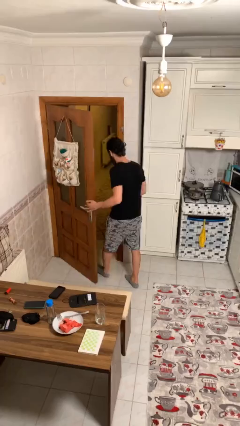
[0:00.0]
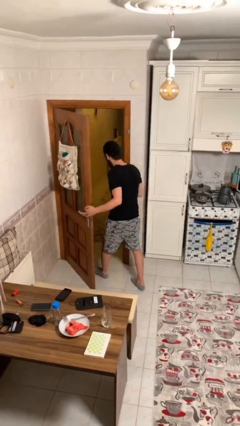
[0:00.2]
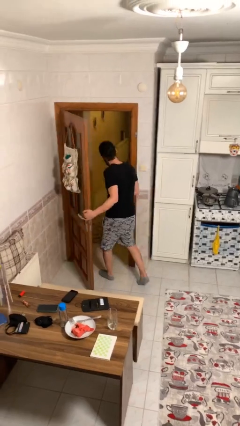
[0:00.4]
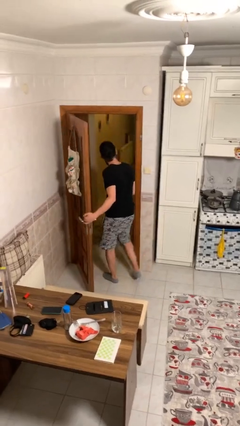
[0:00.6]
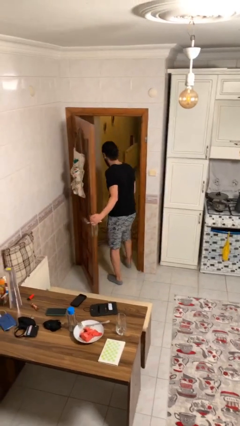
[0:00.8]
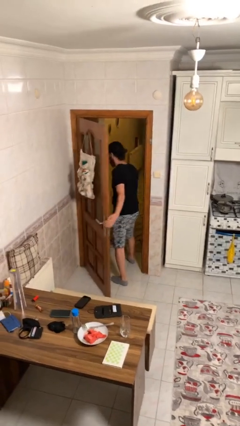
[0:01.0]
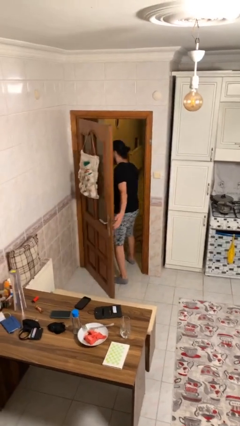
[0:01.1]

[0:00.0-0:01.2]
person exits scene through structure

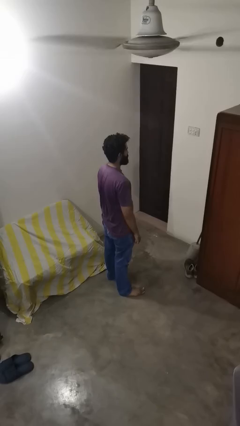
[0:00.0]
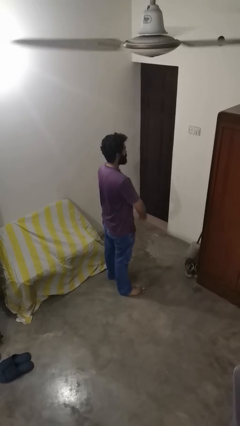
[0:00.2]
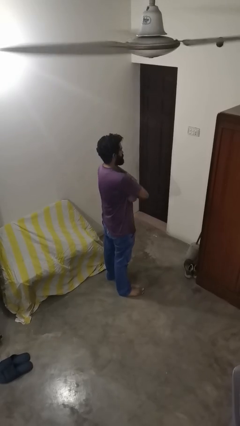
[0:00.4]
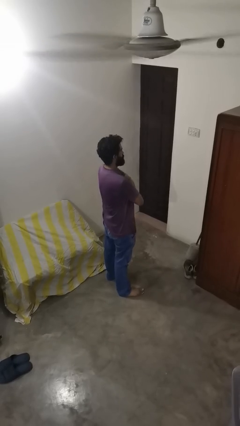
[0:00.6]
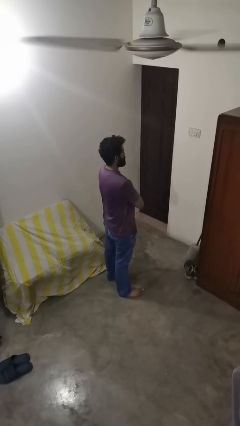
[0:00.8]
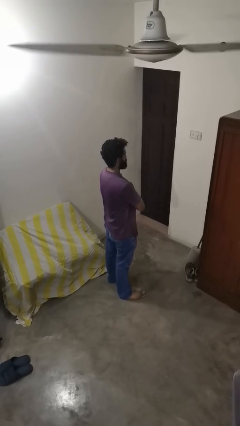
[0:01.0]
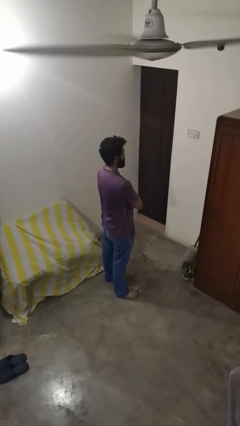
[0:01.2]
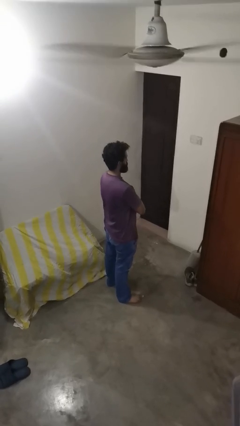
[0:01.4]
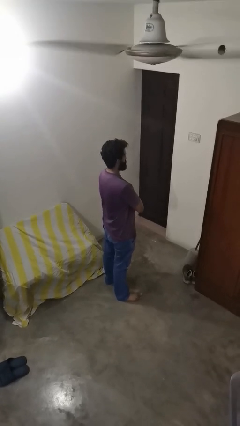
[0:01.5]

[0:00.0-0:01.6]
person crosses arms

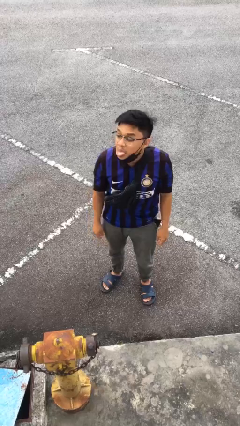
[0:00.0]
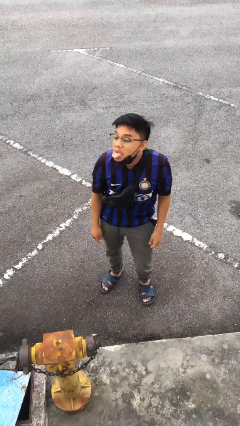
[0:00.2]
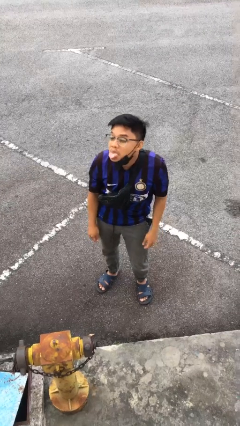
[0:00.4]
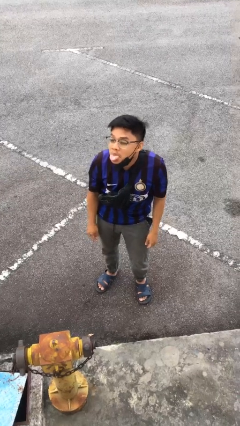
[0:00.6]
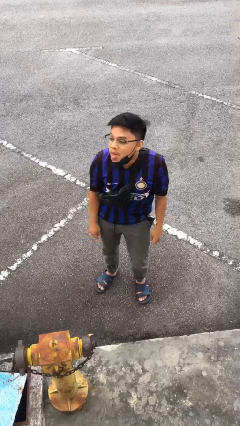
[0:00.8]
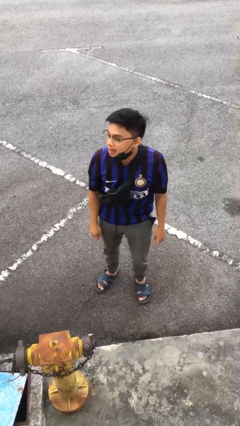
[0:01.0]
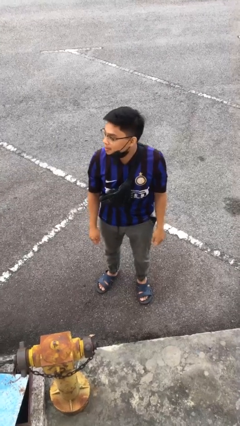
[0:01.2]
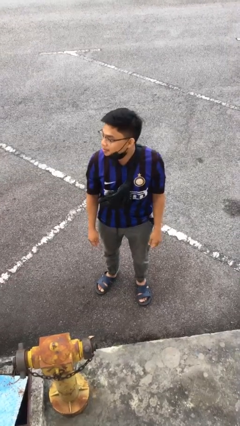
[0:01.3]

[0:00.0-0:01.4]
person sticks out tongue

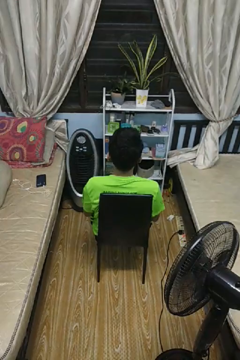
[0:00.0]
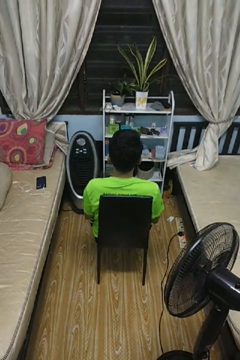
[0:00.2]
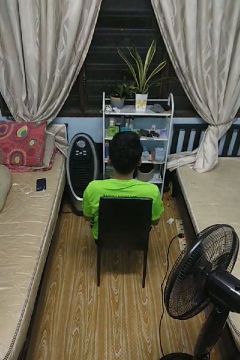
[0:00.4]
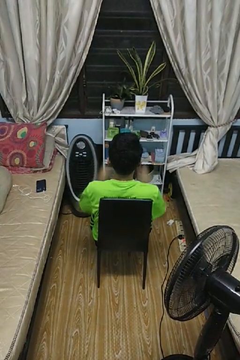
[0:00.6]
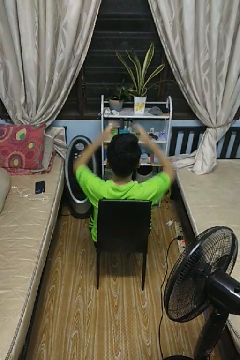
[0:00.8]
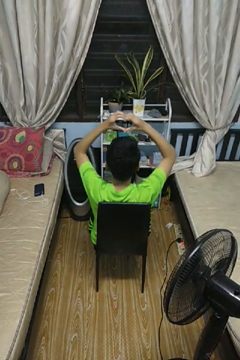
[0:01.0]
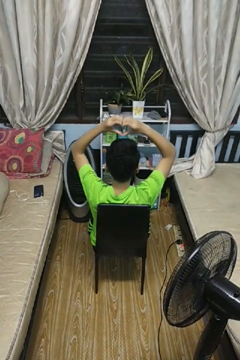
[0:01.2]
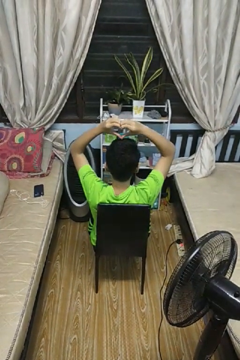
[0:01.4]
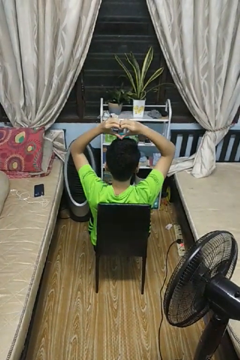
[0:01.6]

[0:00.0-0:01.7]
person gestures heart

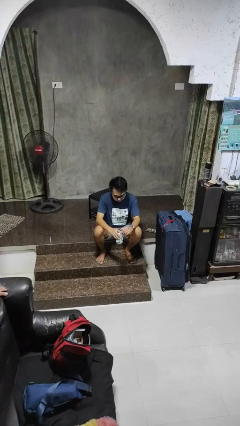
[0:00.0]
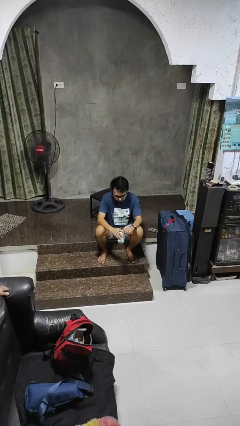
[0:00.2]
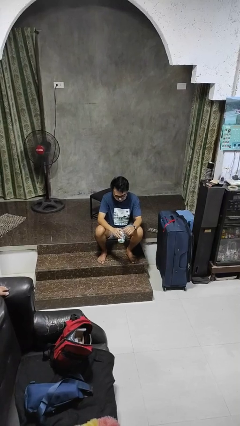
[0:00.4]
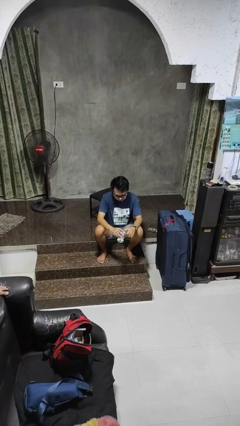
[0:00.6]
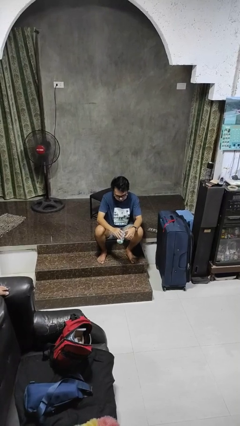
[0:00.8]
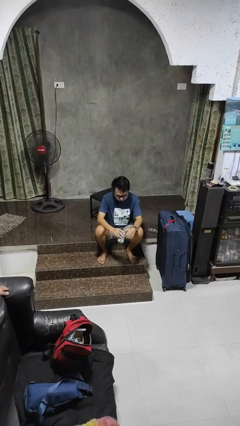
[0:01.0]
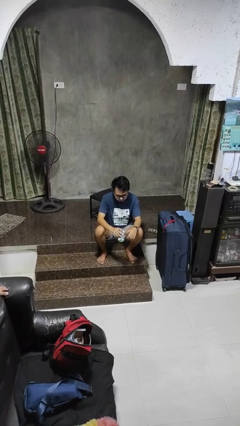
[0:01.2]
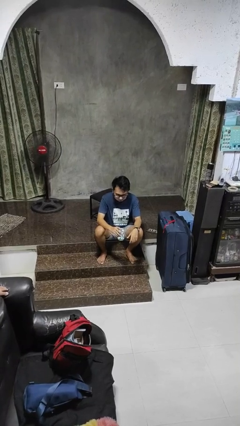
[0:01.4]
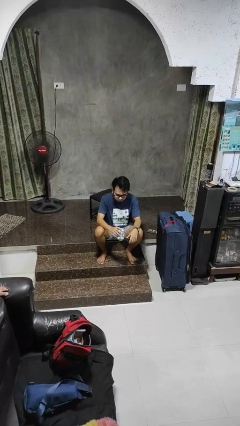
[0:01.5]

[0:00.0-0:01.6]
person opens beverage can

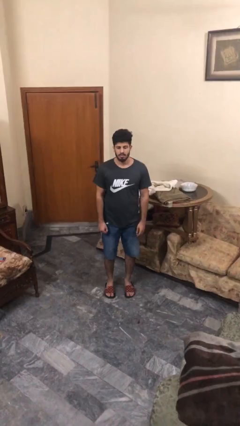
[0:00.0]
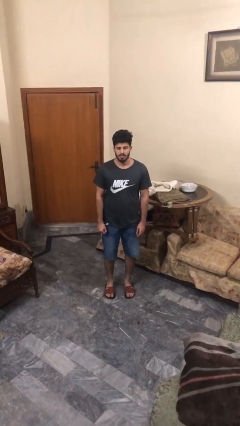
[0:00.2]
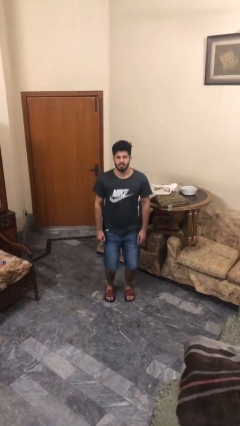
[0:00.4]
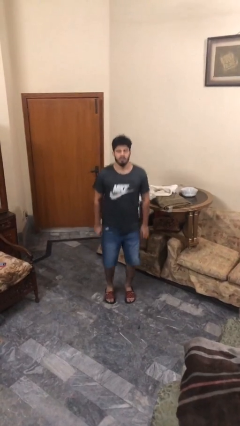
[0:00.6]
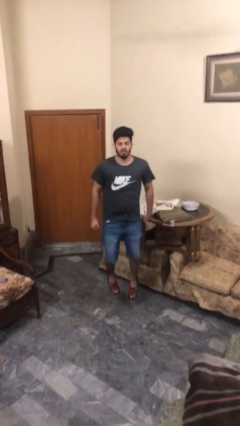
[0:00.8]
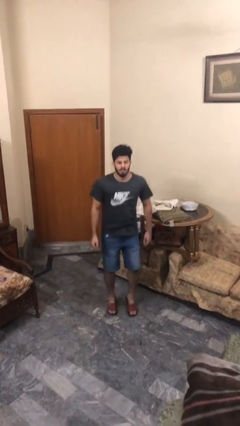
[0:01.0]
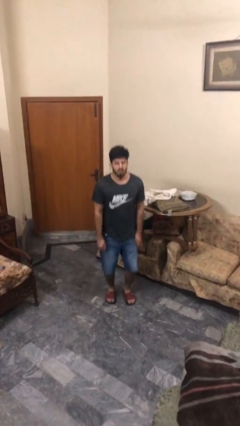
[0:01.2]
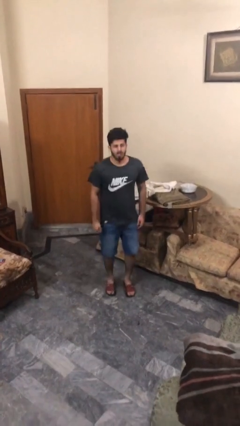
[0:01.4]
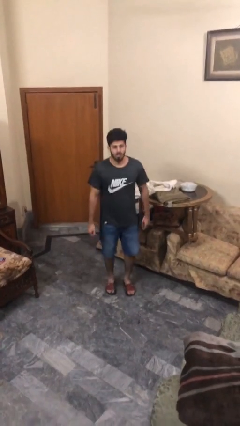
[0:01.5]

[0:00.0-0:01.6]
person jumps

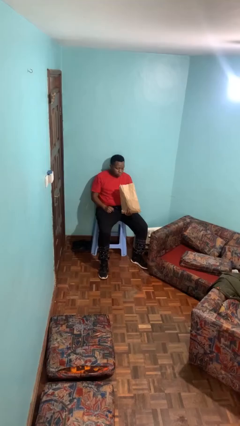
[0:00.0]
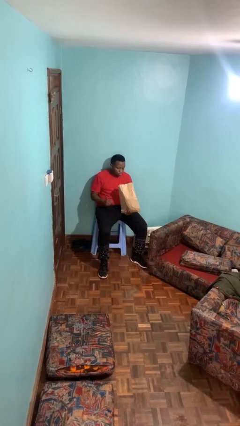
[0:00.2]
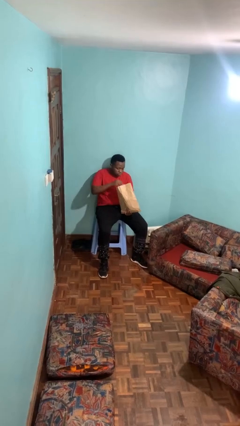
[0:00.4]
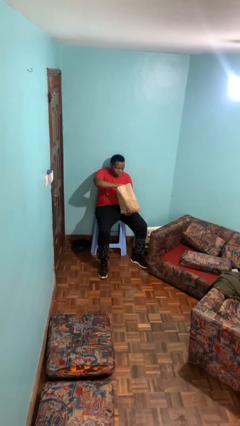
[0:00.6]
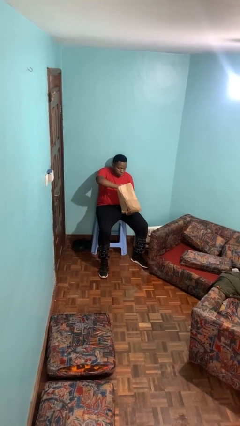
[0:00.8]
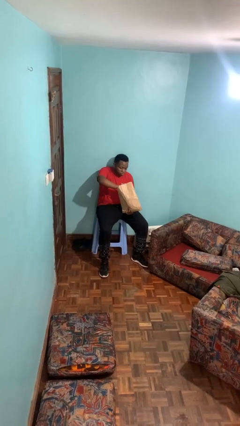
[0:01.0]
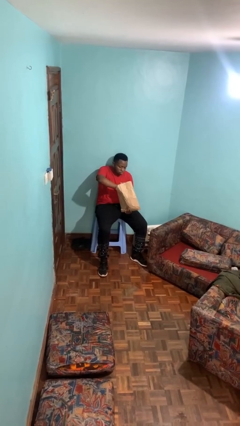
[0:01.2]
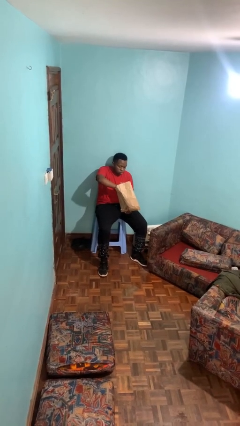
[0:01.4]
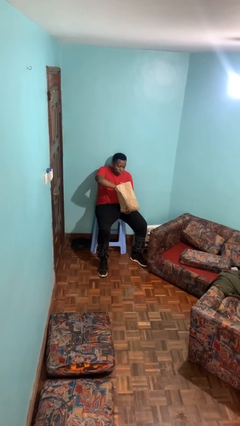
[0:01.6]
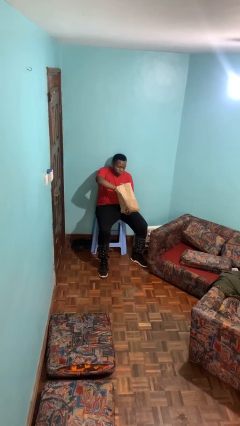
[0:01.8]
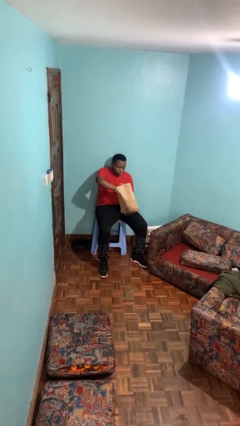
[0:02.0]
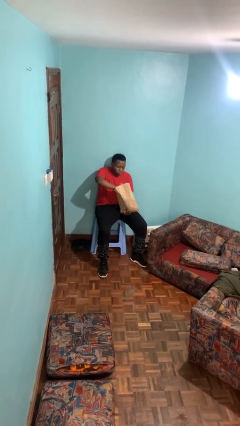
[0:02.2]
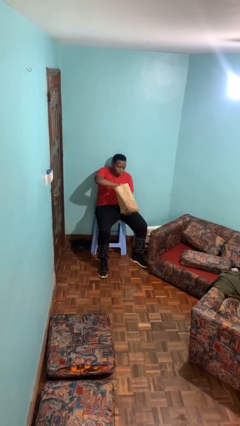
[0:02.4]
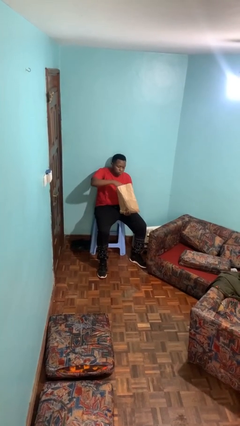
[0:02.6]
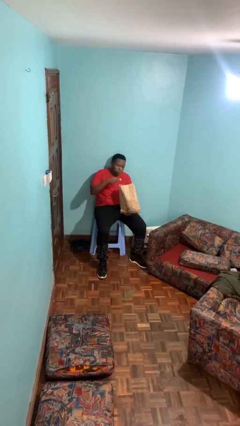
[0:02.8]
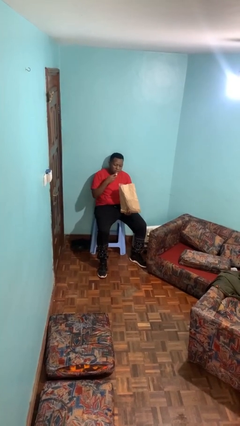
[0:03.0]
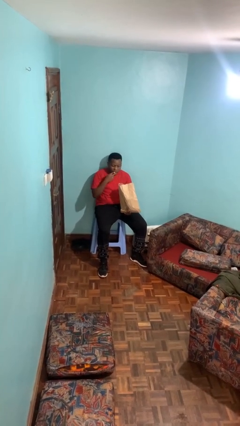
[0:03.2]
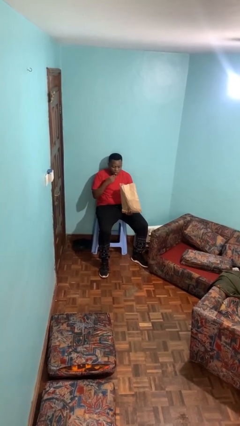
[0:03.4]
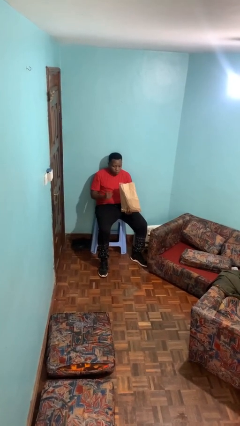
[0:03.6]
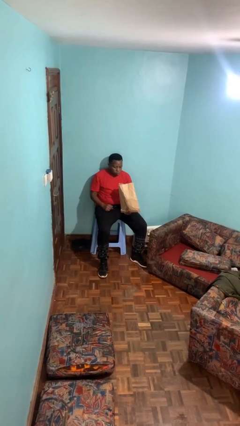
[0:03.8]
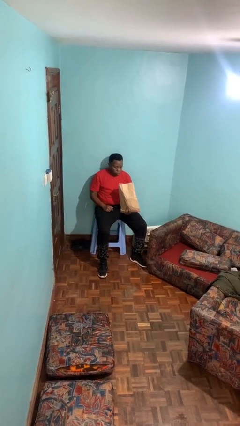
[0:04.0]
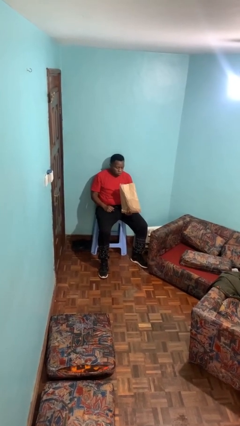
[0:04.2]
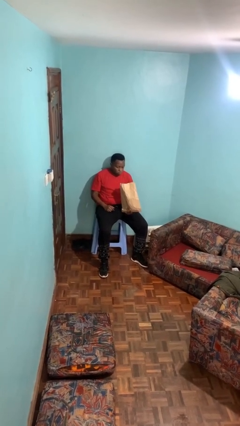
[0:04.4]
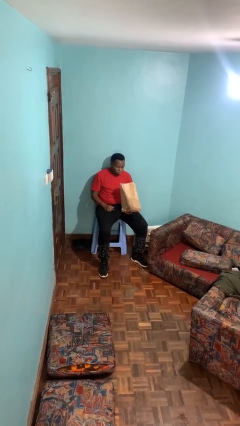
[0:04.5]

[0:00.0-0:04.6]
person eats snack from bag

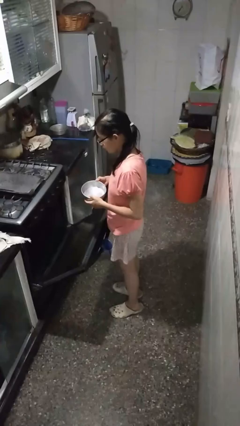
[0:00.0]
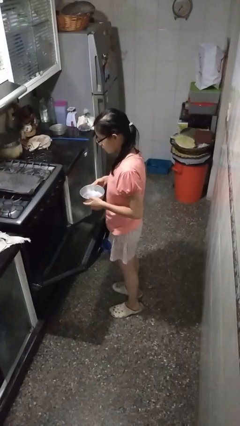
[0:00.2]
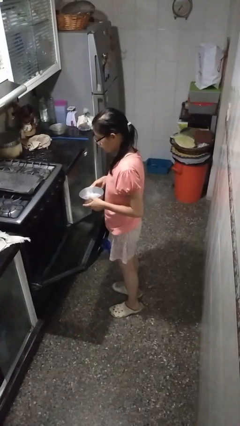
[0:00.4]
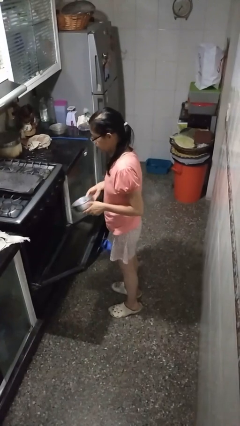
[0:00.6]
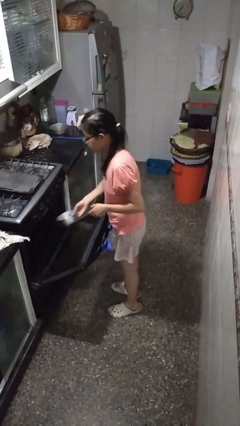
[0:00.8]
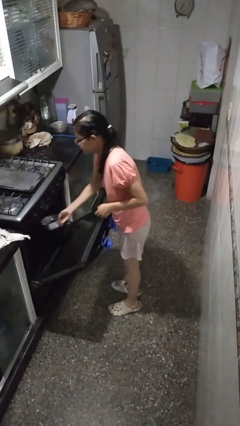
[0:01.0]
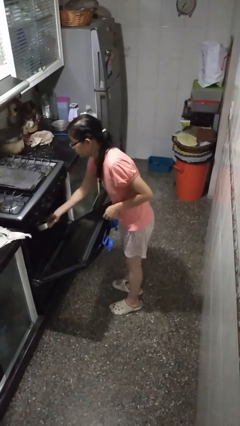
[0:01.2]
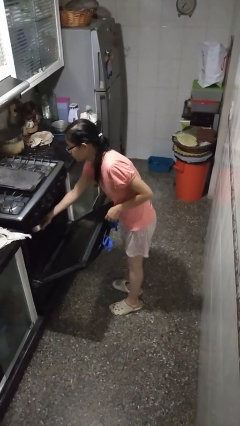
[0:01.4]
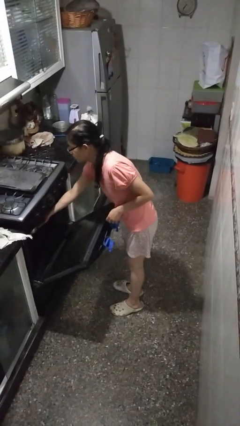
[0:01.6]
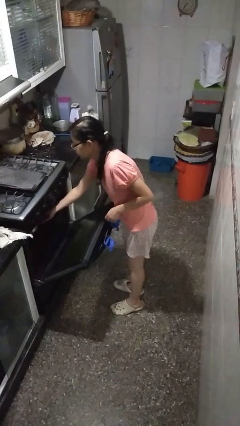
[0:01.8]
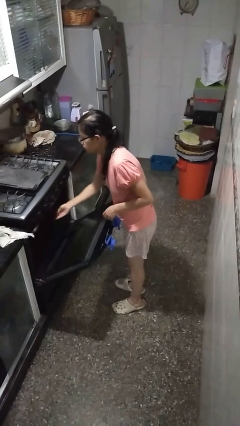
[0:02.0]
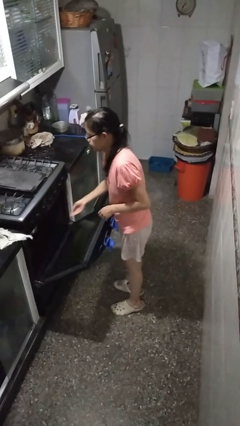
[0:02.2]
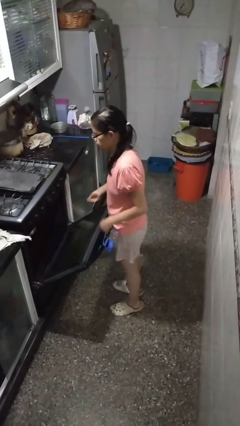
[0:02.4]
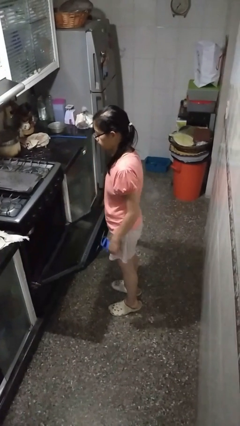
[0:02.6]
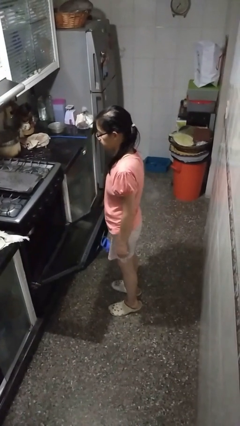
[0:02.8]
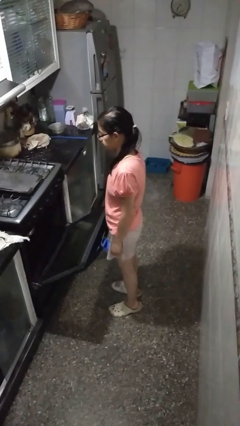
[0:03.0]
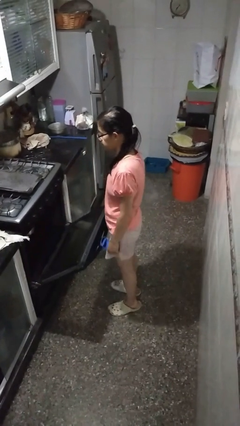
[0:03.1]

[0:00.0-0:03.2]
person puts object into oven

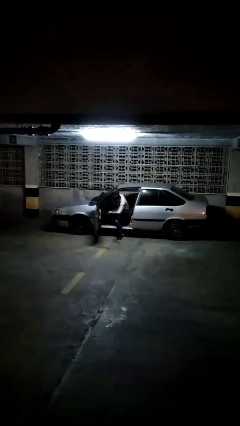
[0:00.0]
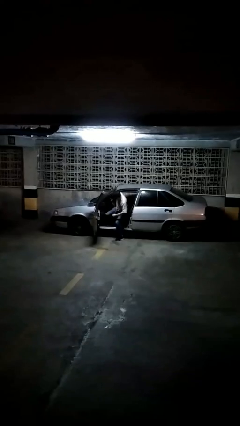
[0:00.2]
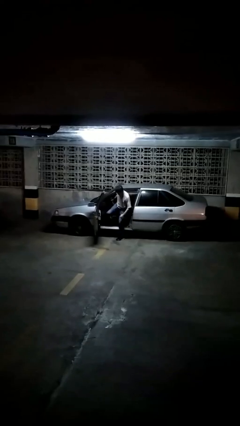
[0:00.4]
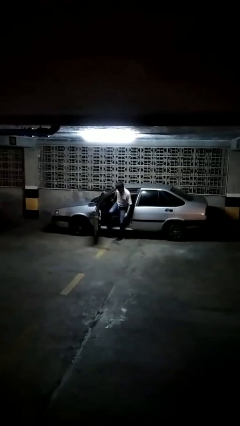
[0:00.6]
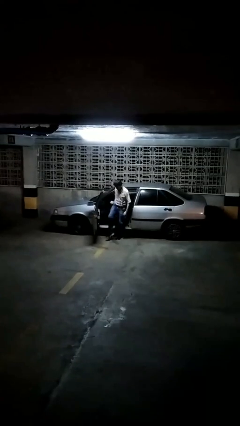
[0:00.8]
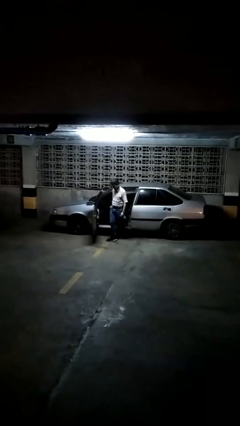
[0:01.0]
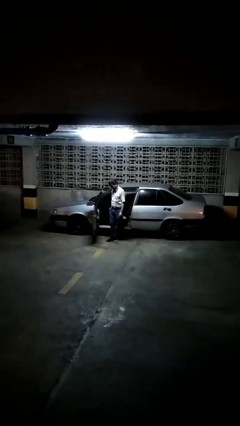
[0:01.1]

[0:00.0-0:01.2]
person exits car
